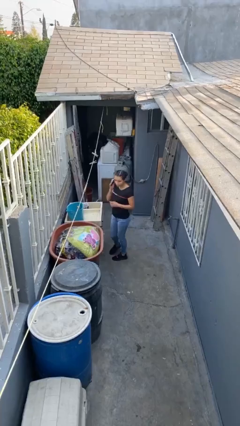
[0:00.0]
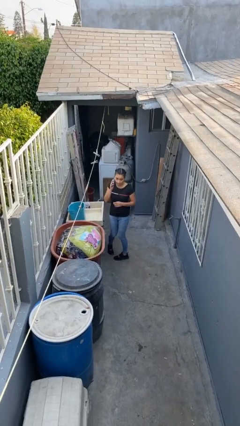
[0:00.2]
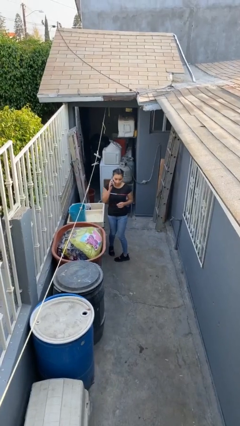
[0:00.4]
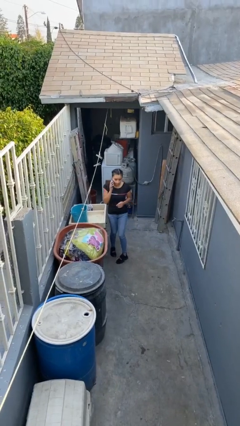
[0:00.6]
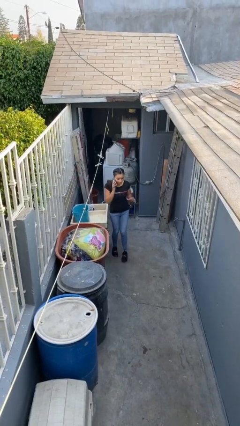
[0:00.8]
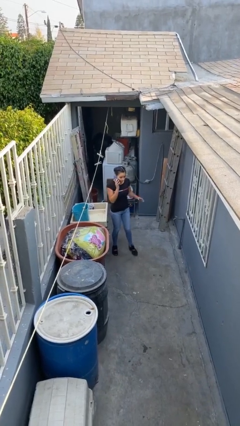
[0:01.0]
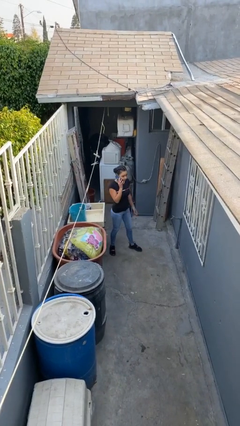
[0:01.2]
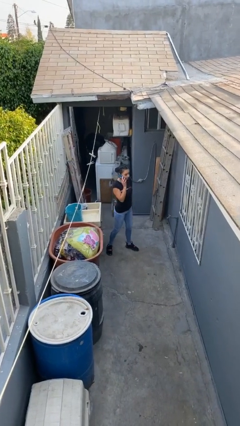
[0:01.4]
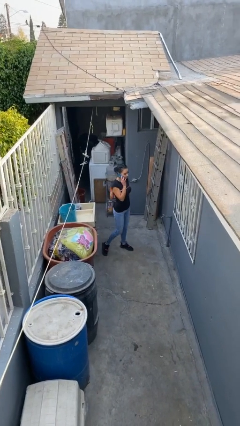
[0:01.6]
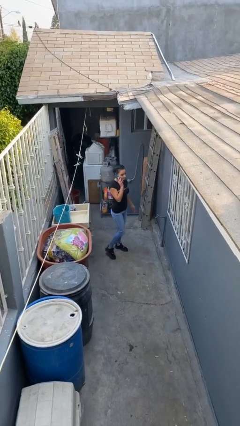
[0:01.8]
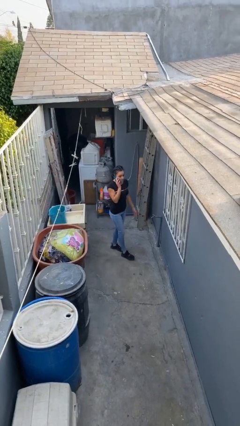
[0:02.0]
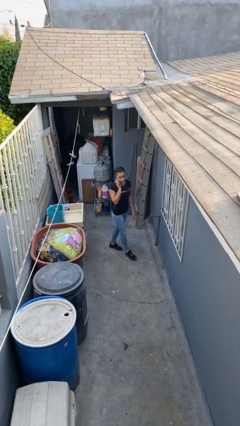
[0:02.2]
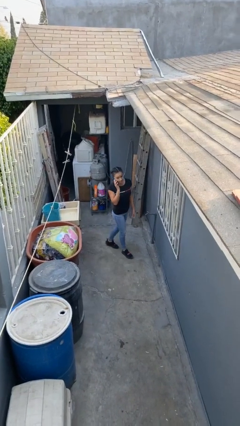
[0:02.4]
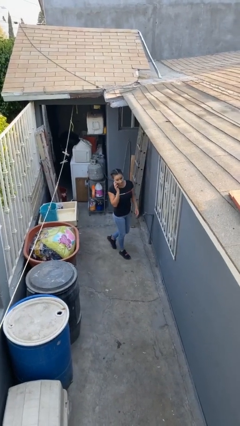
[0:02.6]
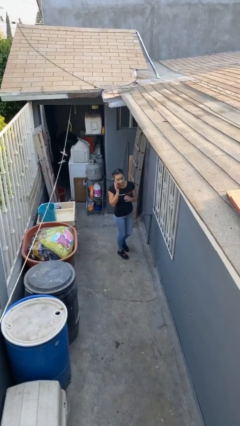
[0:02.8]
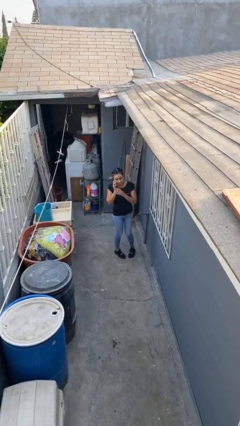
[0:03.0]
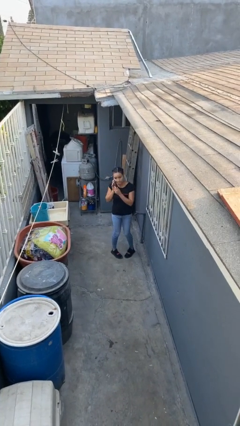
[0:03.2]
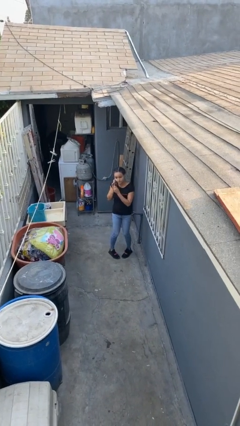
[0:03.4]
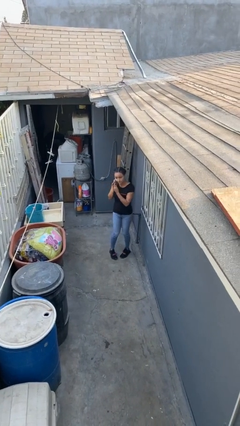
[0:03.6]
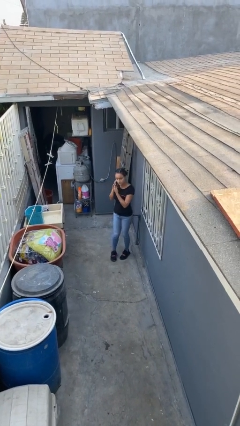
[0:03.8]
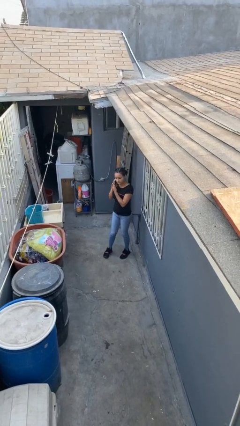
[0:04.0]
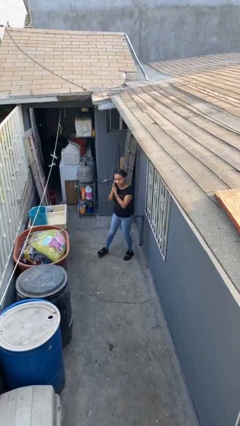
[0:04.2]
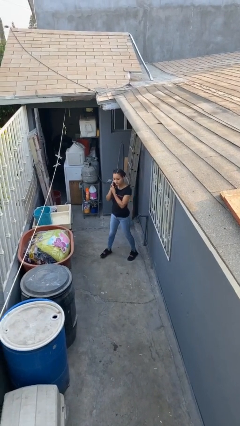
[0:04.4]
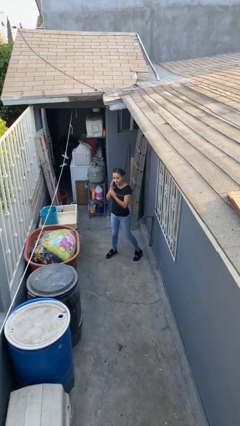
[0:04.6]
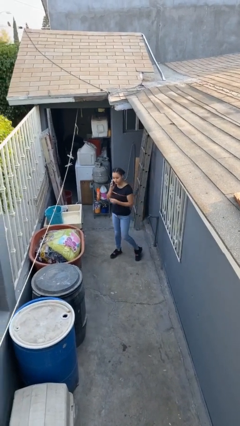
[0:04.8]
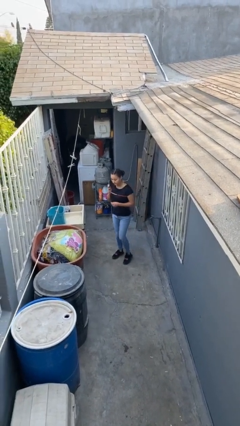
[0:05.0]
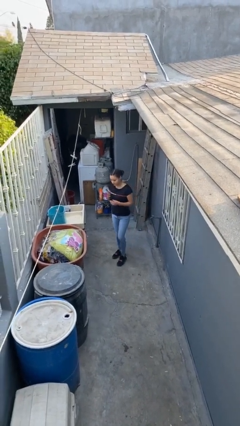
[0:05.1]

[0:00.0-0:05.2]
person talks on phone

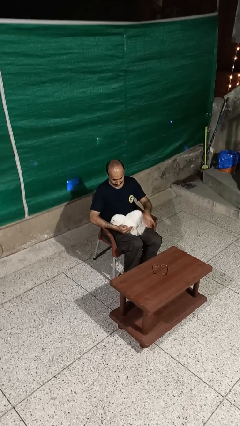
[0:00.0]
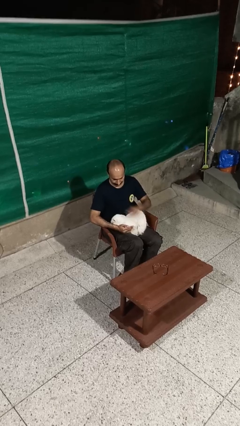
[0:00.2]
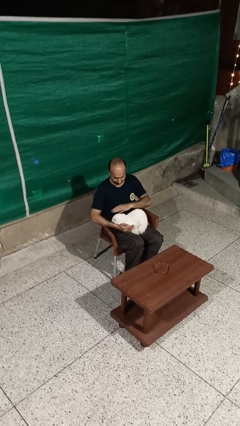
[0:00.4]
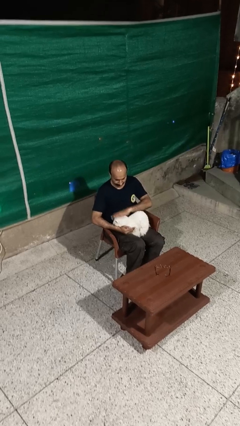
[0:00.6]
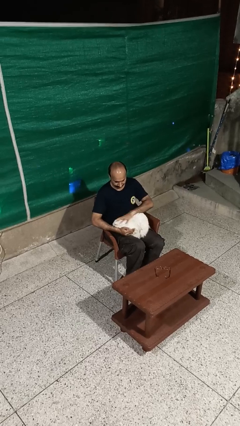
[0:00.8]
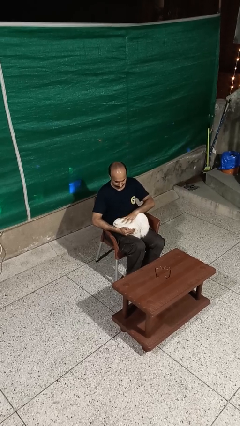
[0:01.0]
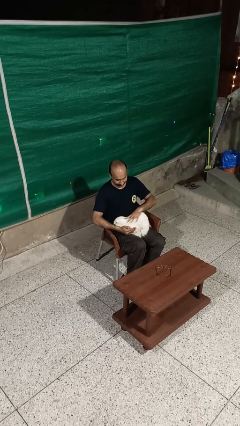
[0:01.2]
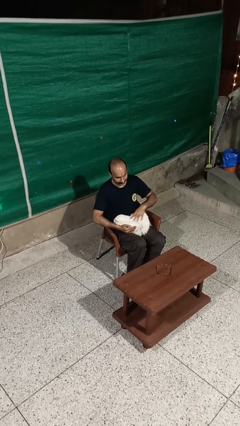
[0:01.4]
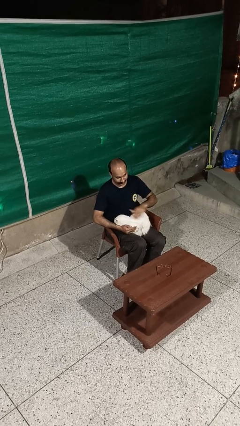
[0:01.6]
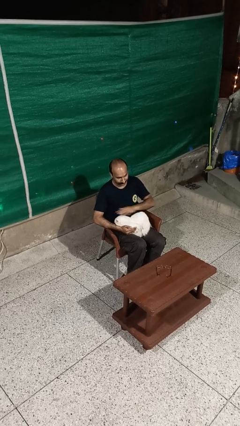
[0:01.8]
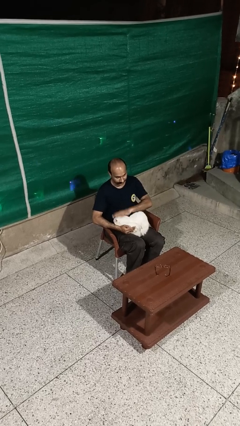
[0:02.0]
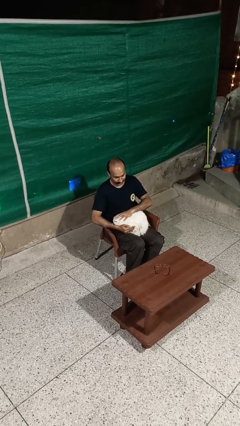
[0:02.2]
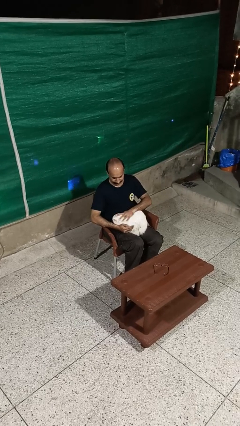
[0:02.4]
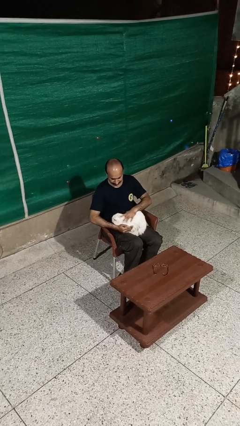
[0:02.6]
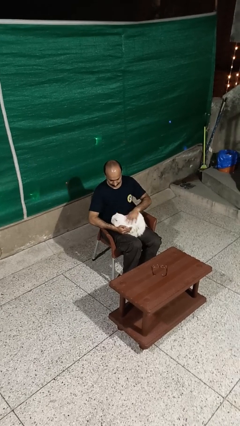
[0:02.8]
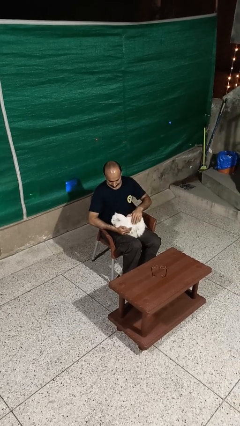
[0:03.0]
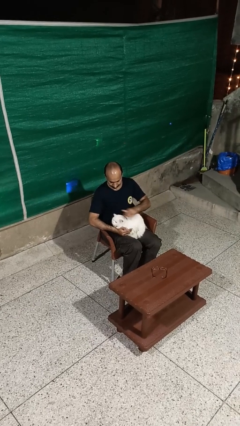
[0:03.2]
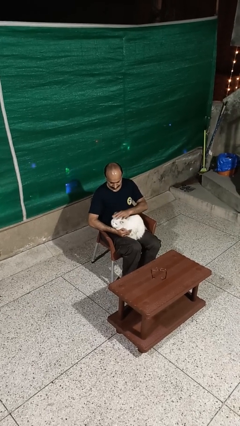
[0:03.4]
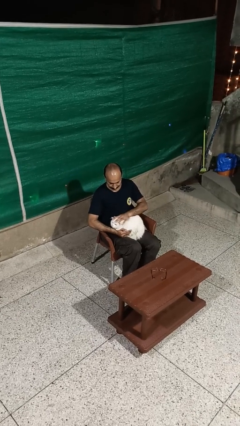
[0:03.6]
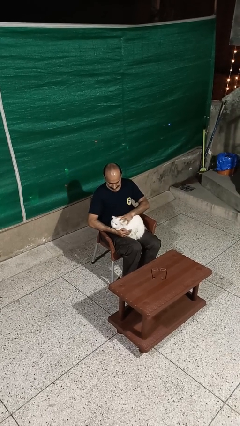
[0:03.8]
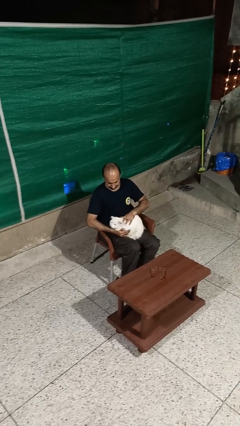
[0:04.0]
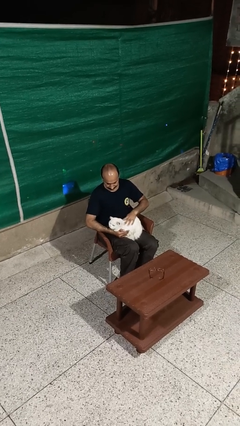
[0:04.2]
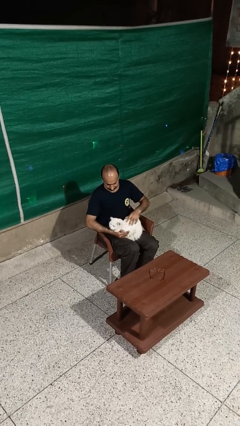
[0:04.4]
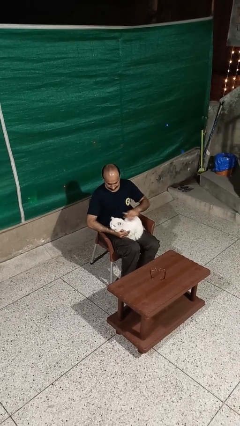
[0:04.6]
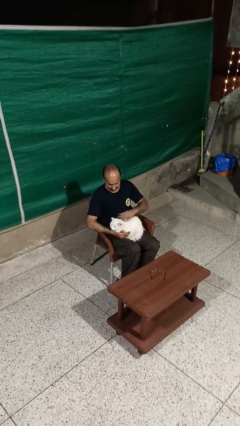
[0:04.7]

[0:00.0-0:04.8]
person pets cat

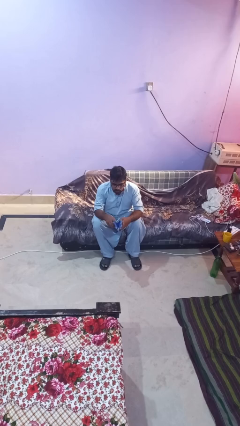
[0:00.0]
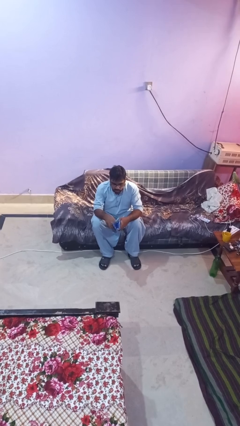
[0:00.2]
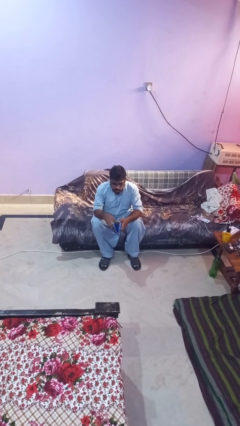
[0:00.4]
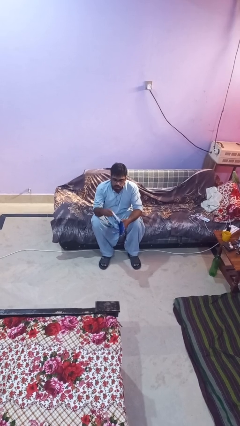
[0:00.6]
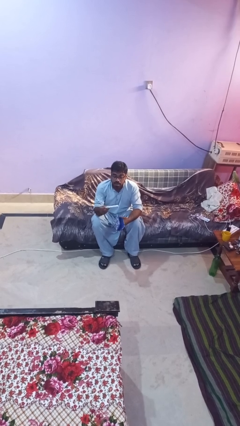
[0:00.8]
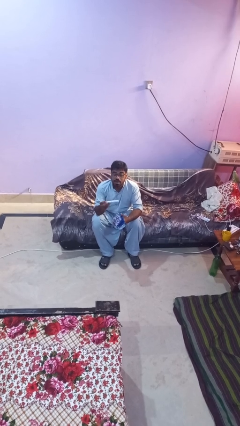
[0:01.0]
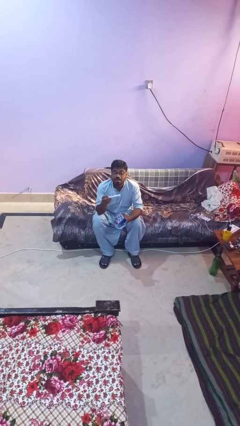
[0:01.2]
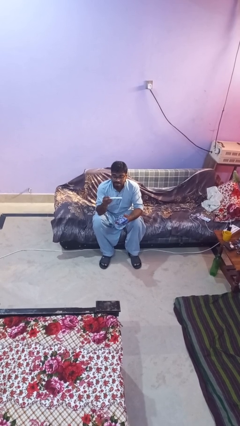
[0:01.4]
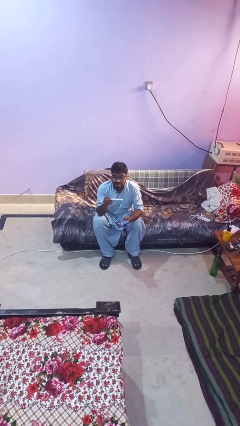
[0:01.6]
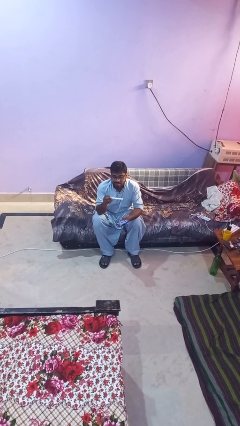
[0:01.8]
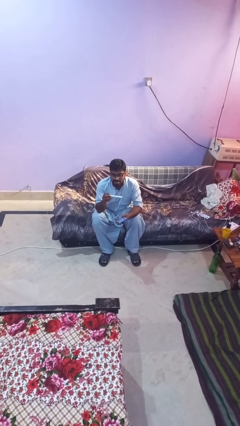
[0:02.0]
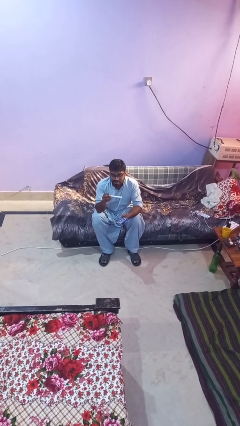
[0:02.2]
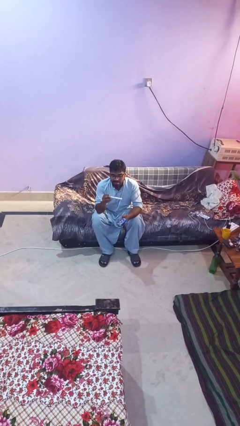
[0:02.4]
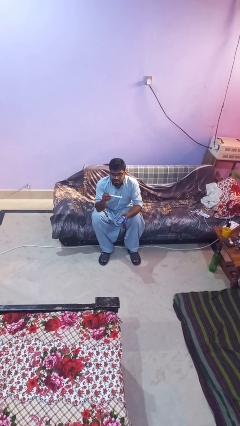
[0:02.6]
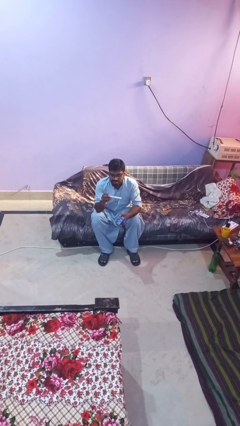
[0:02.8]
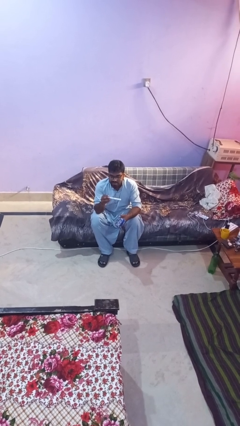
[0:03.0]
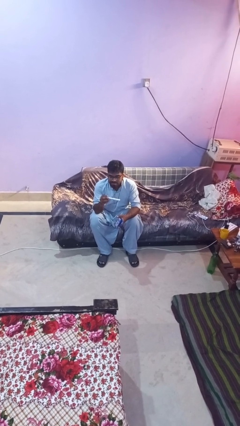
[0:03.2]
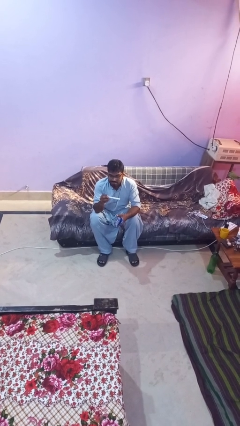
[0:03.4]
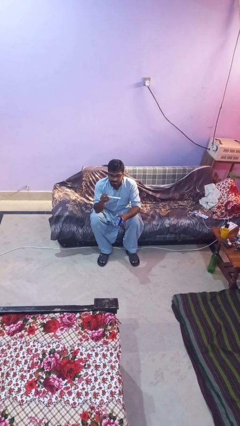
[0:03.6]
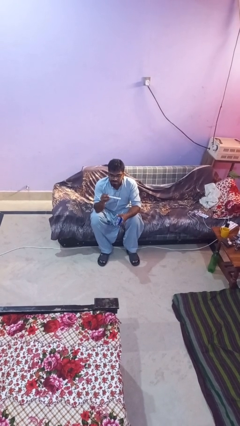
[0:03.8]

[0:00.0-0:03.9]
person takes object from purse

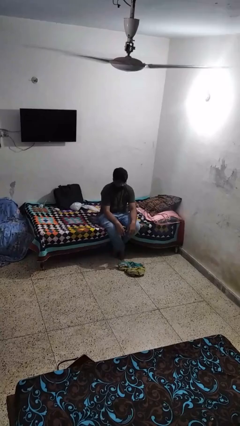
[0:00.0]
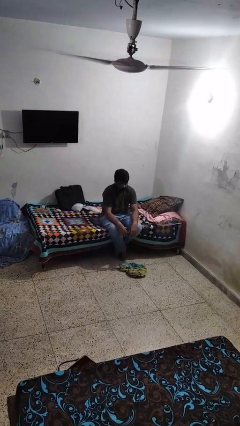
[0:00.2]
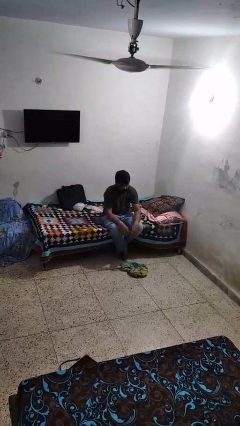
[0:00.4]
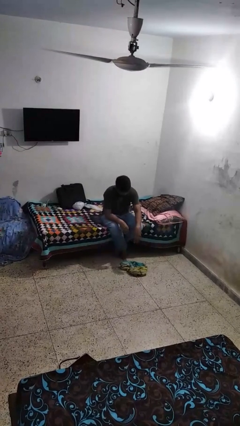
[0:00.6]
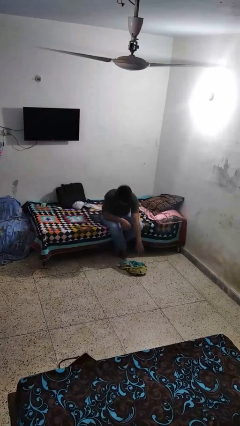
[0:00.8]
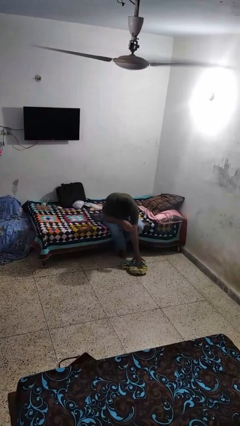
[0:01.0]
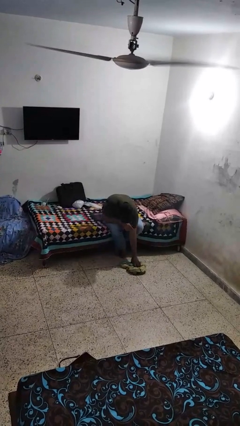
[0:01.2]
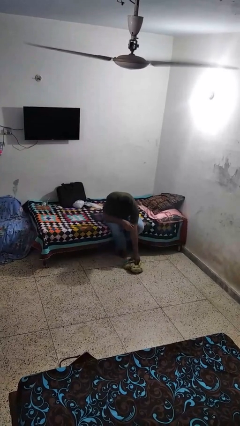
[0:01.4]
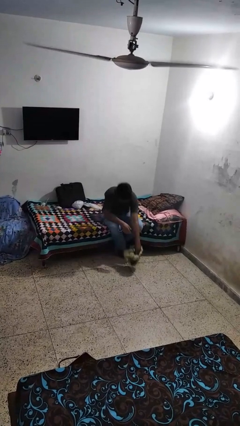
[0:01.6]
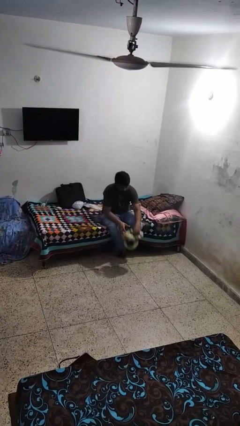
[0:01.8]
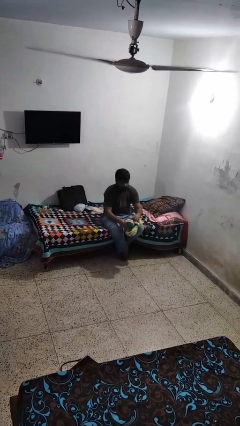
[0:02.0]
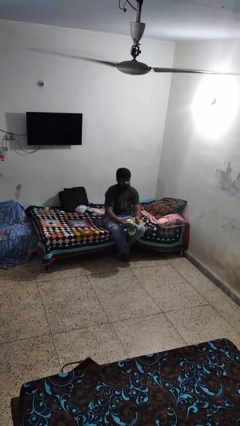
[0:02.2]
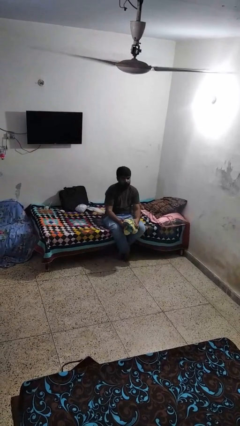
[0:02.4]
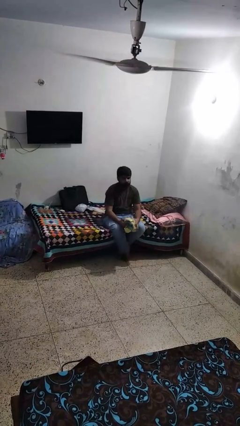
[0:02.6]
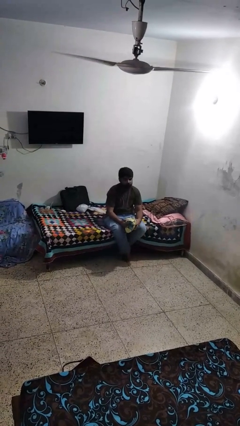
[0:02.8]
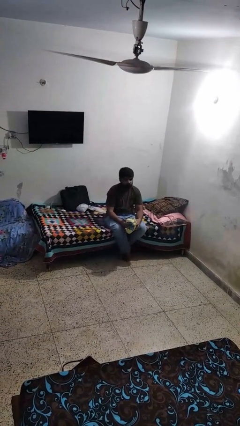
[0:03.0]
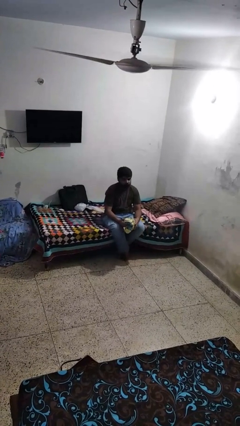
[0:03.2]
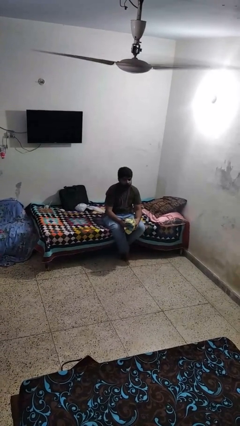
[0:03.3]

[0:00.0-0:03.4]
person picks up object from floor

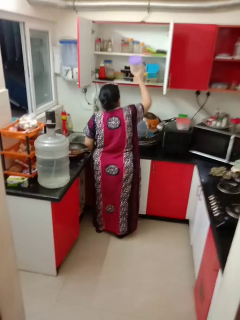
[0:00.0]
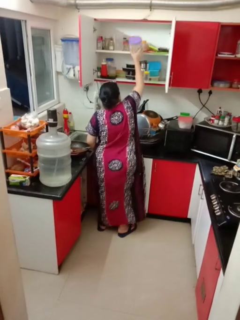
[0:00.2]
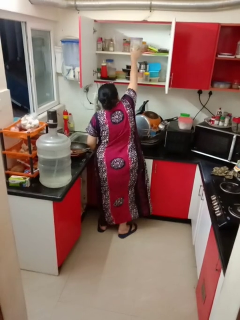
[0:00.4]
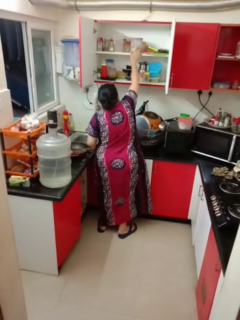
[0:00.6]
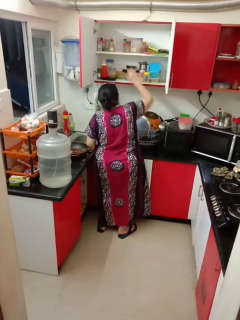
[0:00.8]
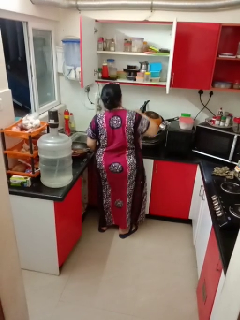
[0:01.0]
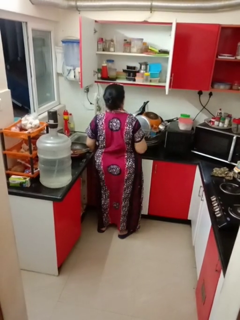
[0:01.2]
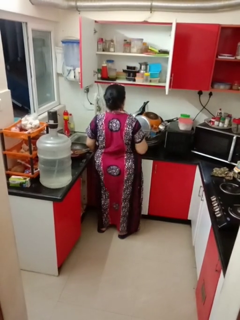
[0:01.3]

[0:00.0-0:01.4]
person puts object in cabinet
